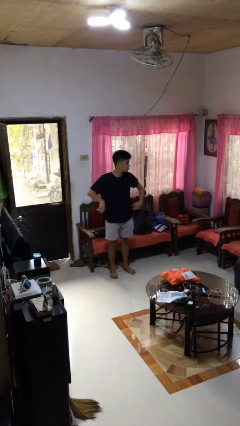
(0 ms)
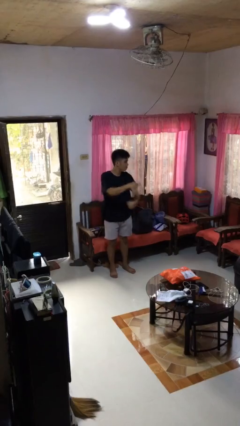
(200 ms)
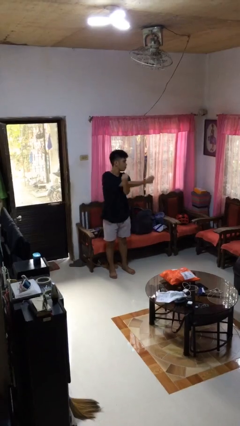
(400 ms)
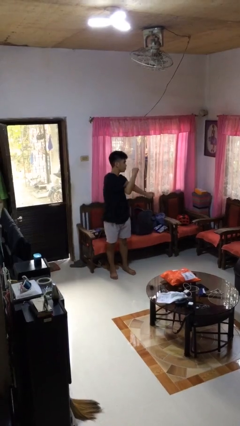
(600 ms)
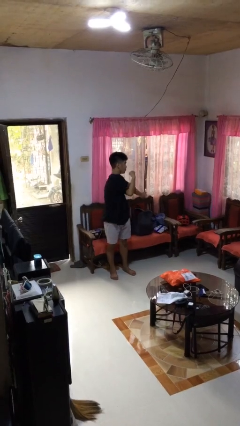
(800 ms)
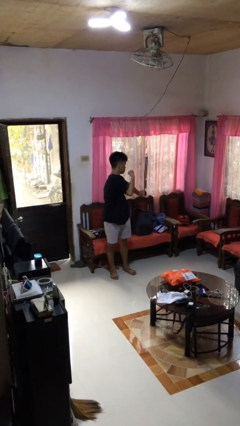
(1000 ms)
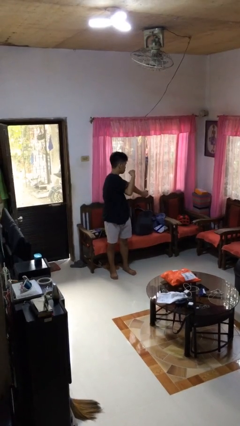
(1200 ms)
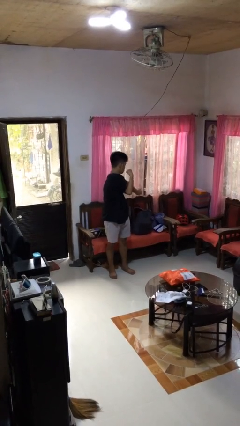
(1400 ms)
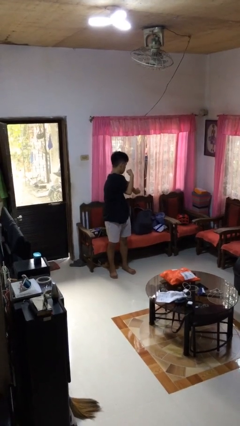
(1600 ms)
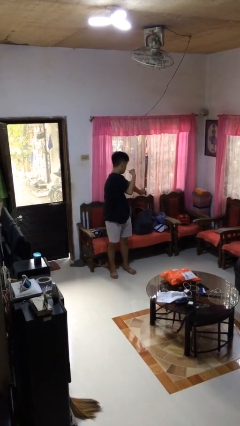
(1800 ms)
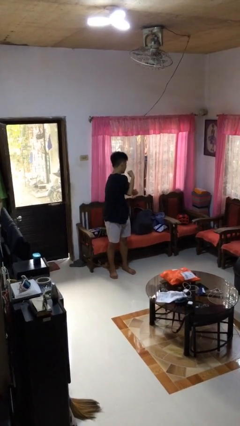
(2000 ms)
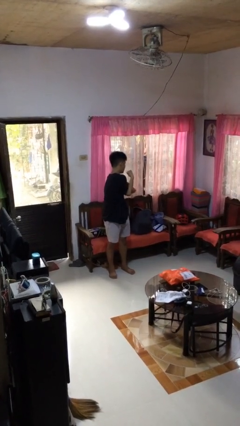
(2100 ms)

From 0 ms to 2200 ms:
person stretches arms to side

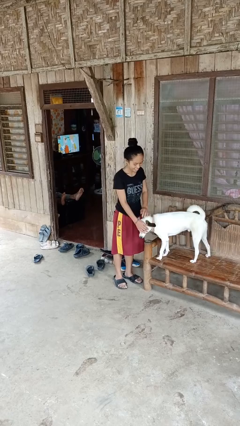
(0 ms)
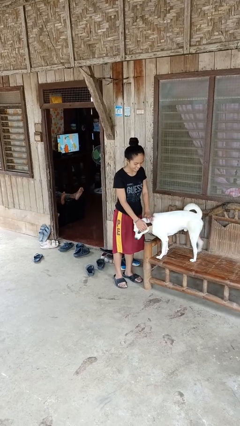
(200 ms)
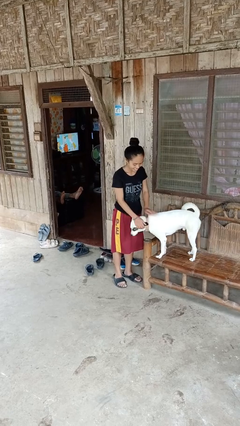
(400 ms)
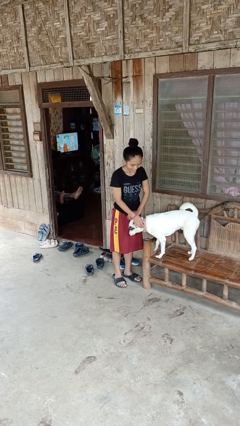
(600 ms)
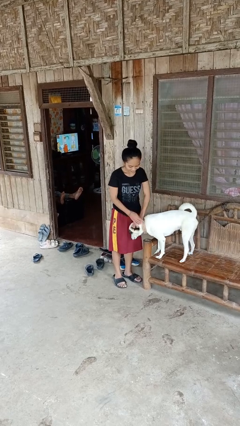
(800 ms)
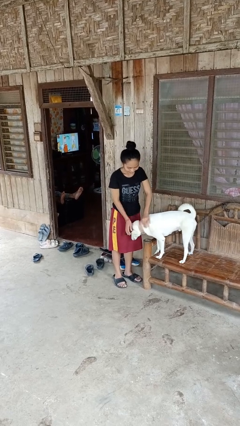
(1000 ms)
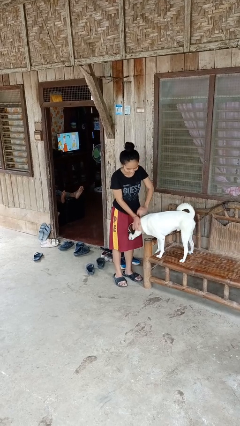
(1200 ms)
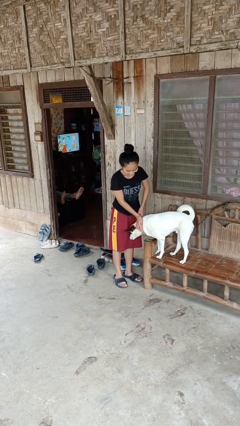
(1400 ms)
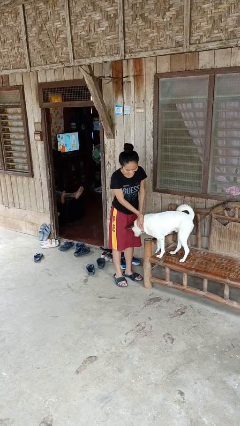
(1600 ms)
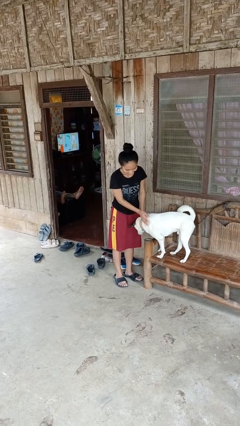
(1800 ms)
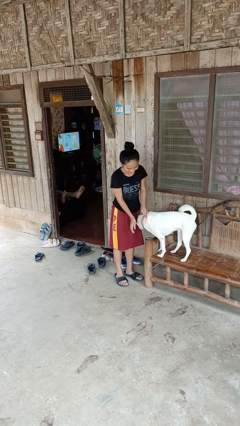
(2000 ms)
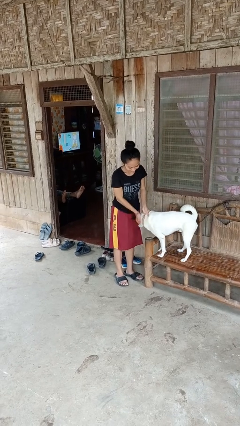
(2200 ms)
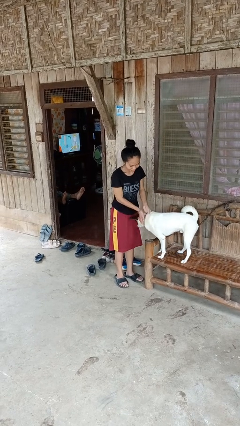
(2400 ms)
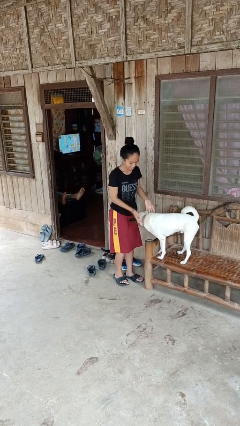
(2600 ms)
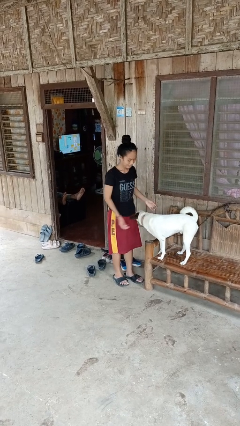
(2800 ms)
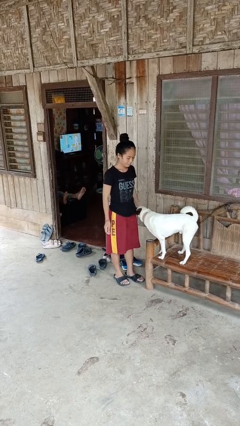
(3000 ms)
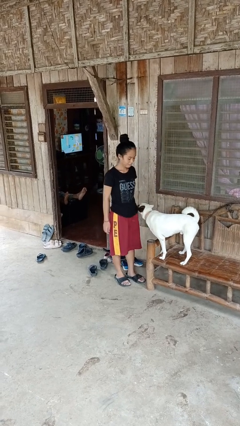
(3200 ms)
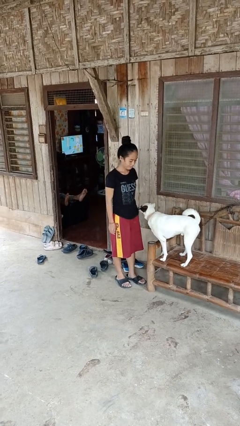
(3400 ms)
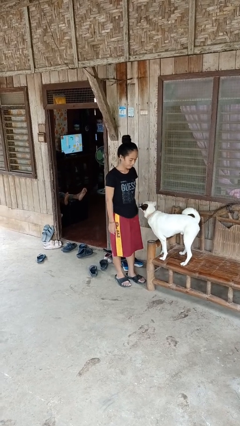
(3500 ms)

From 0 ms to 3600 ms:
person pets dog

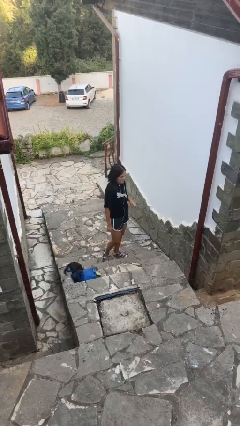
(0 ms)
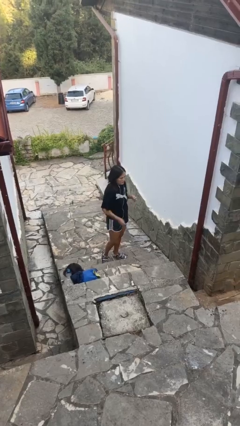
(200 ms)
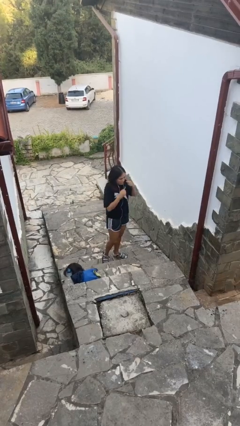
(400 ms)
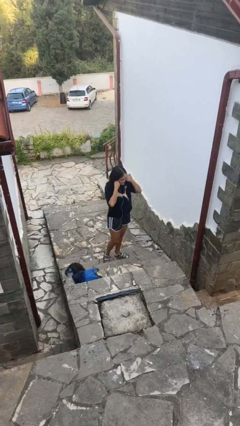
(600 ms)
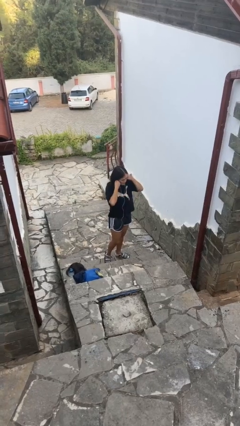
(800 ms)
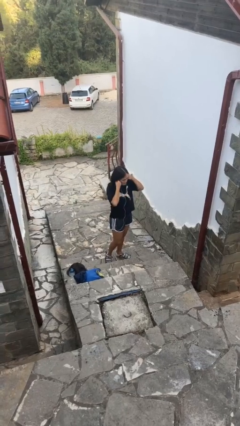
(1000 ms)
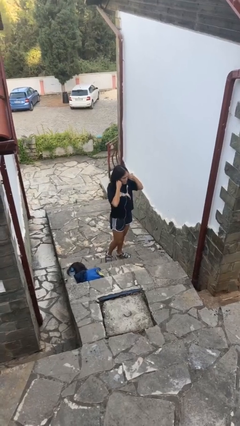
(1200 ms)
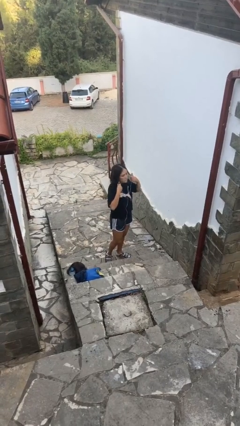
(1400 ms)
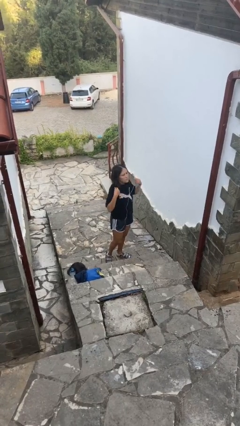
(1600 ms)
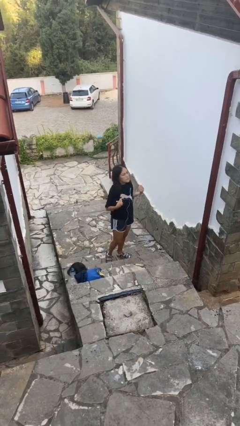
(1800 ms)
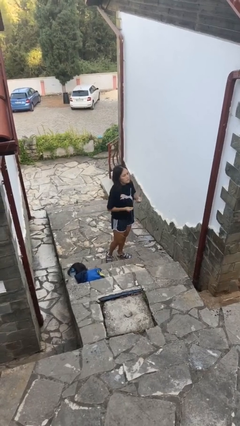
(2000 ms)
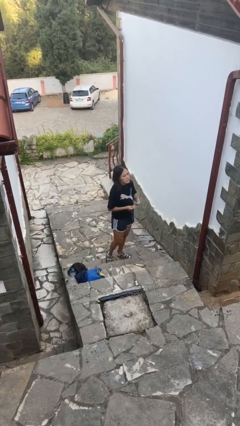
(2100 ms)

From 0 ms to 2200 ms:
person takes off headphones

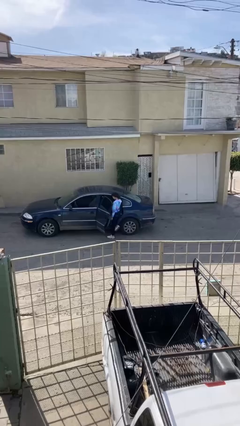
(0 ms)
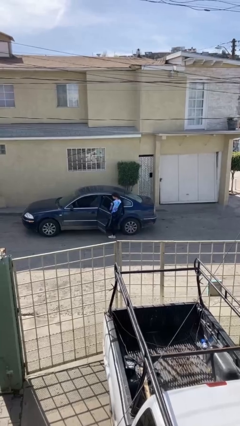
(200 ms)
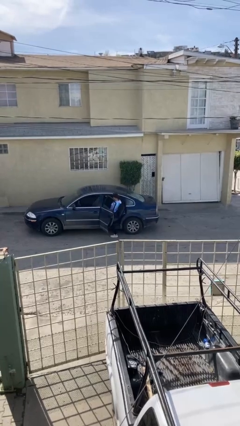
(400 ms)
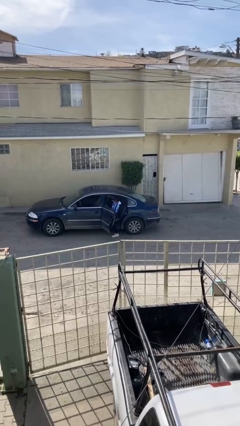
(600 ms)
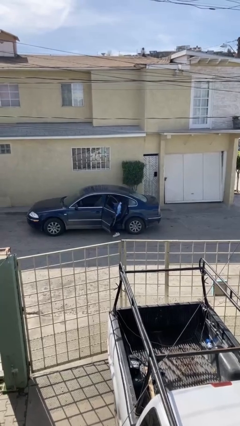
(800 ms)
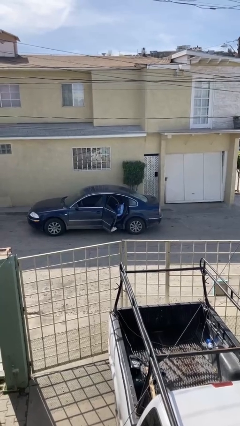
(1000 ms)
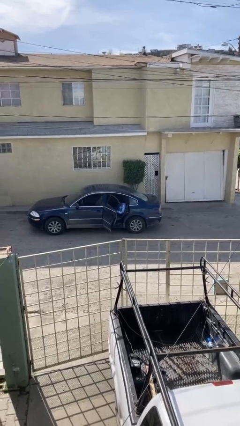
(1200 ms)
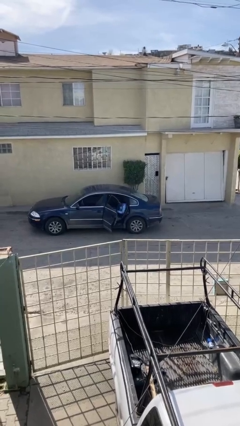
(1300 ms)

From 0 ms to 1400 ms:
person enters car

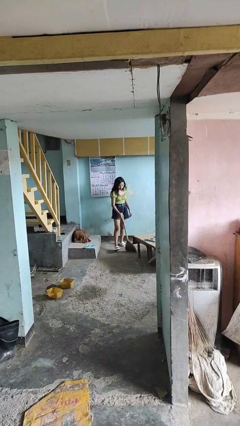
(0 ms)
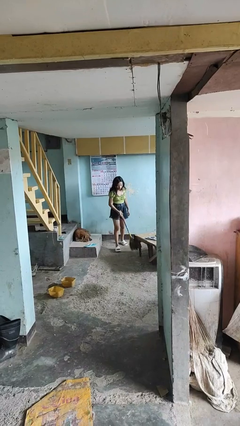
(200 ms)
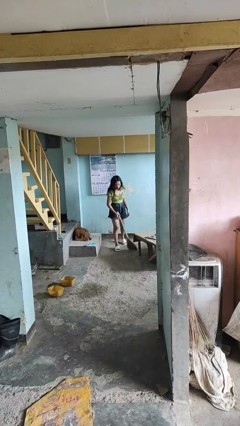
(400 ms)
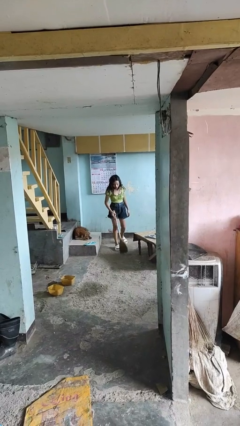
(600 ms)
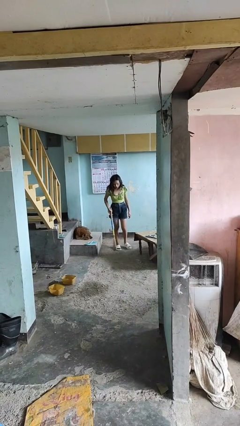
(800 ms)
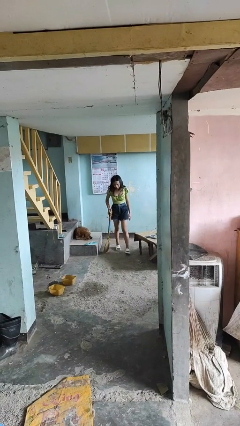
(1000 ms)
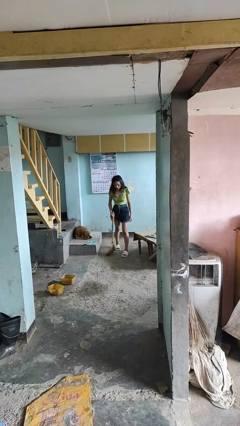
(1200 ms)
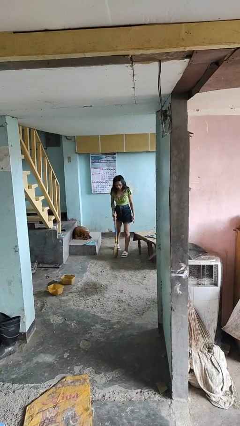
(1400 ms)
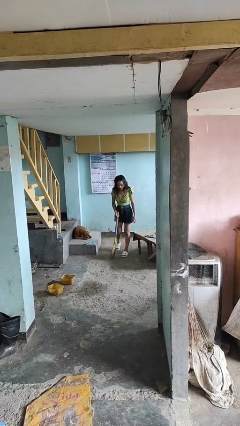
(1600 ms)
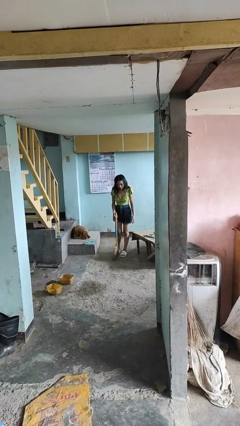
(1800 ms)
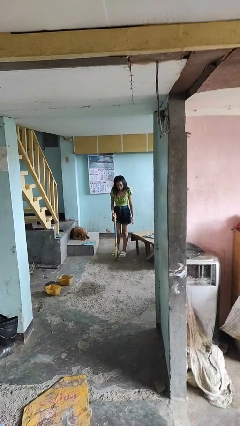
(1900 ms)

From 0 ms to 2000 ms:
person sweeps floor

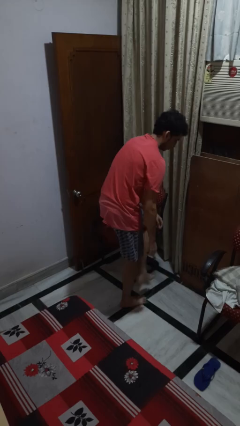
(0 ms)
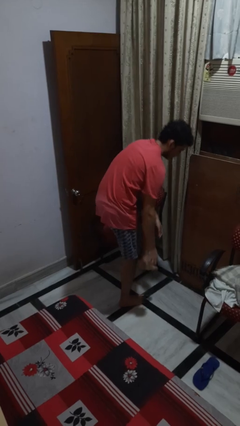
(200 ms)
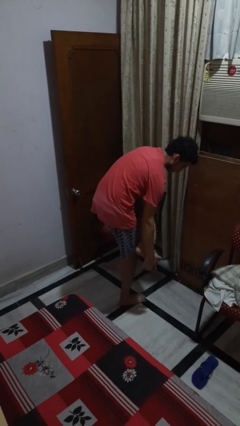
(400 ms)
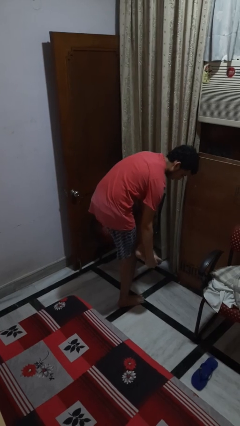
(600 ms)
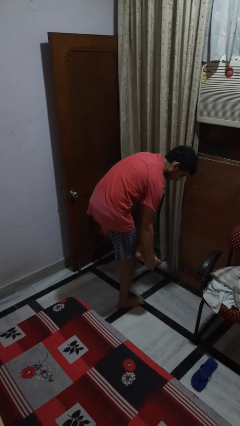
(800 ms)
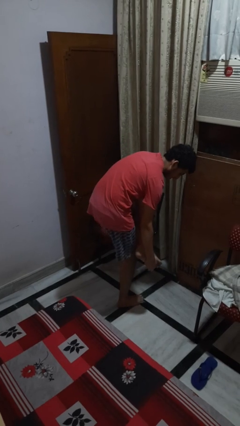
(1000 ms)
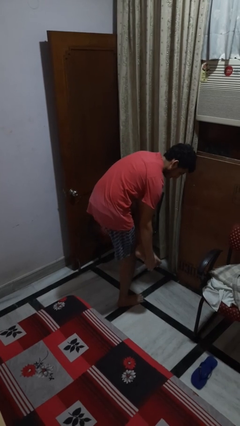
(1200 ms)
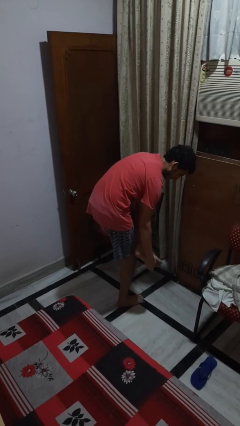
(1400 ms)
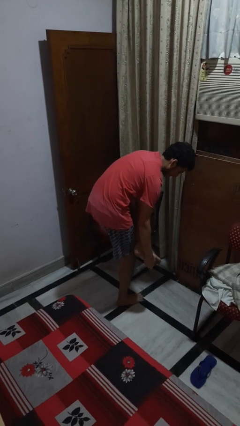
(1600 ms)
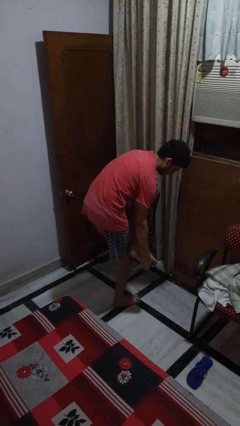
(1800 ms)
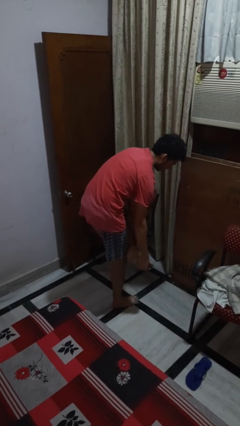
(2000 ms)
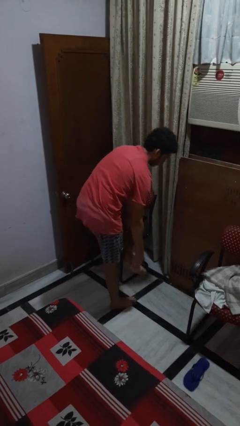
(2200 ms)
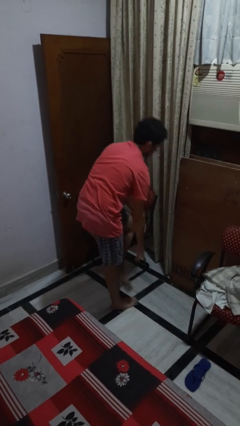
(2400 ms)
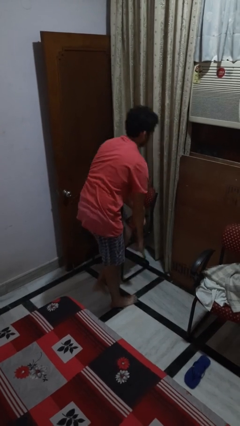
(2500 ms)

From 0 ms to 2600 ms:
person stubs toe

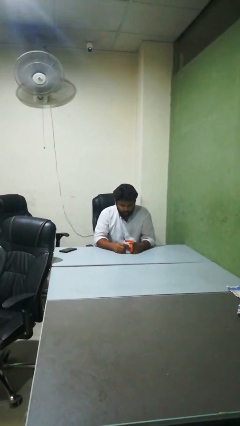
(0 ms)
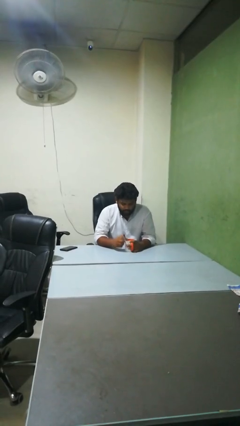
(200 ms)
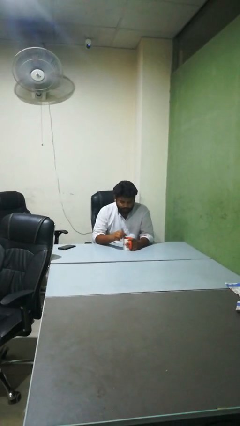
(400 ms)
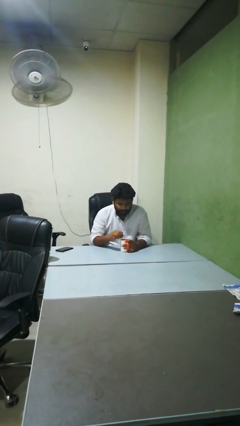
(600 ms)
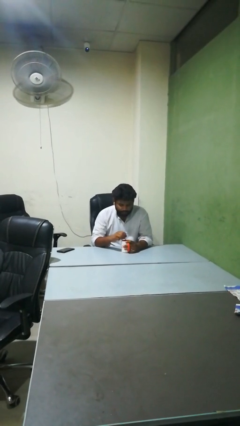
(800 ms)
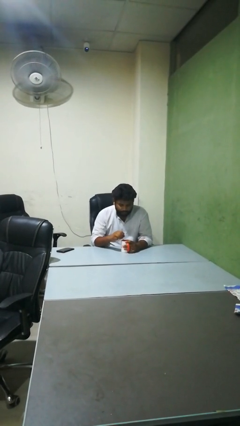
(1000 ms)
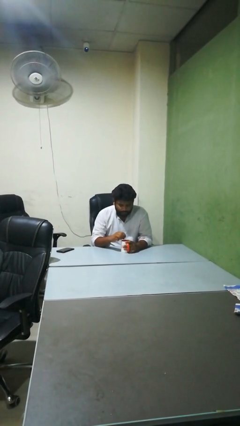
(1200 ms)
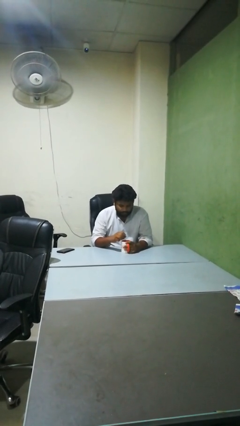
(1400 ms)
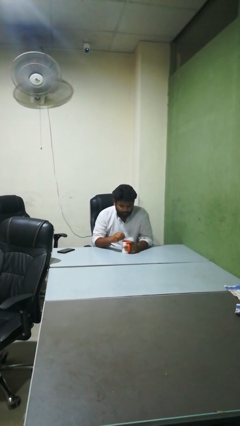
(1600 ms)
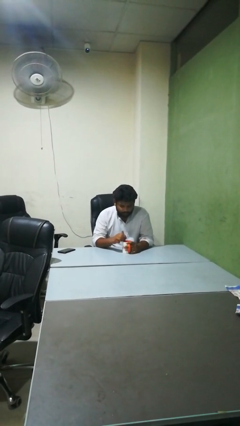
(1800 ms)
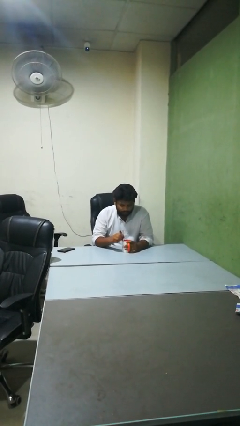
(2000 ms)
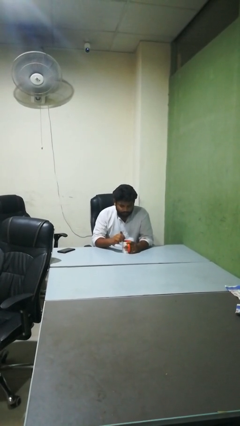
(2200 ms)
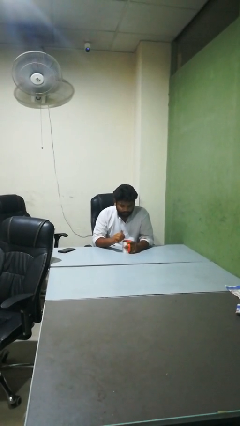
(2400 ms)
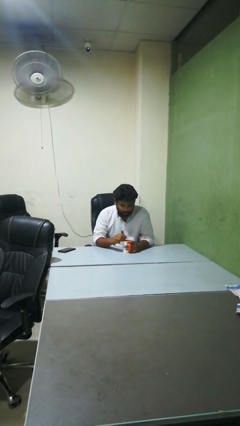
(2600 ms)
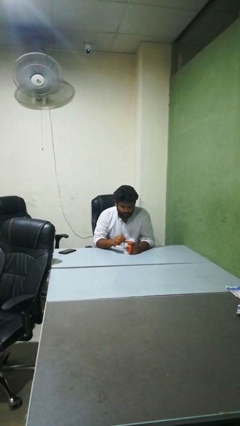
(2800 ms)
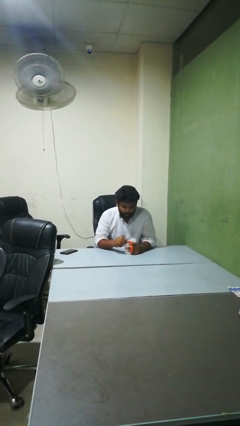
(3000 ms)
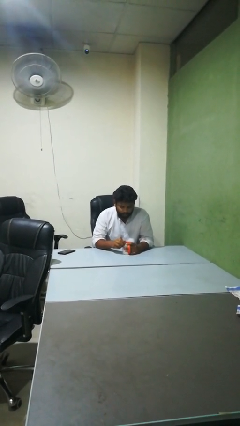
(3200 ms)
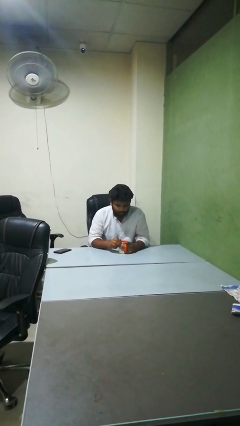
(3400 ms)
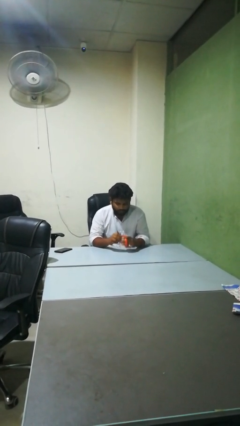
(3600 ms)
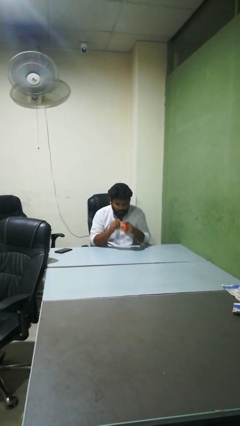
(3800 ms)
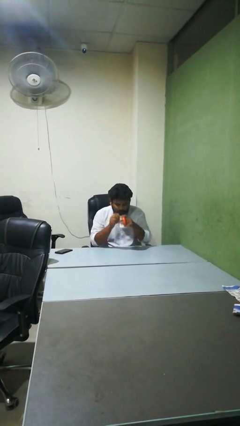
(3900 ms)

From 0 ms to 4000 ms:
person stirs mug
